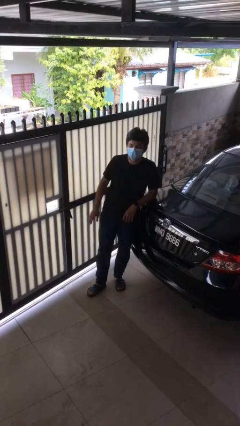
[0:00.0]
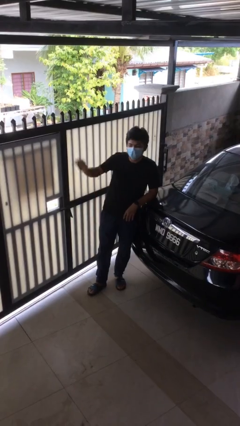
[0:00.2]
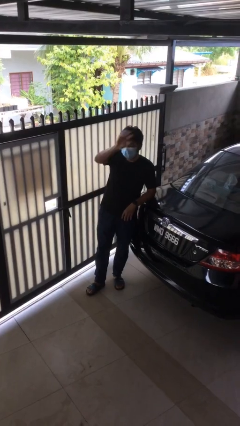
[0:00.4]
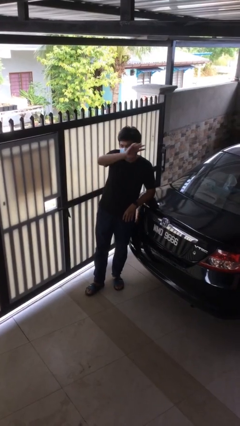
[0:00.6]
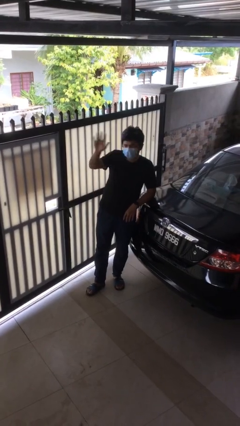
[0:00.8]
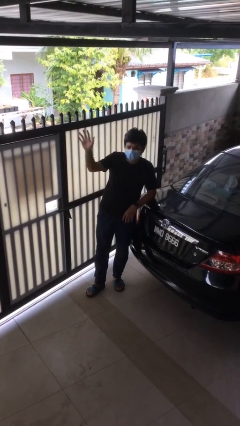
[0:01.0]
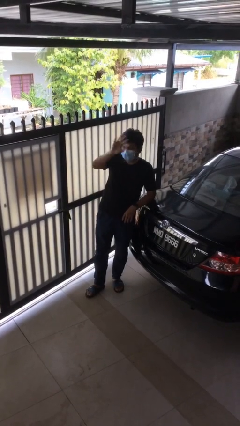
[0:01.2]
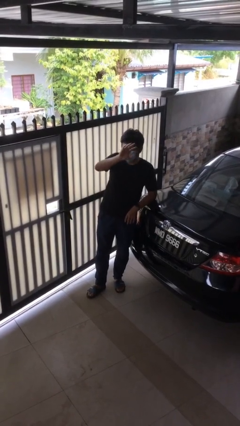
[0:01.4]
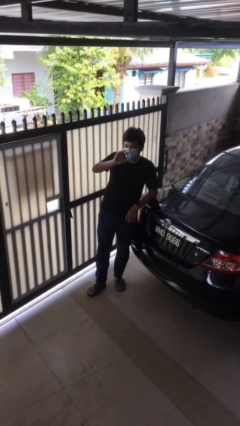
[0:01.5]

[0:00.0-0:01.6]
person waves at person

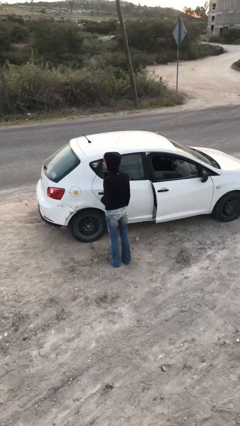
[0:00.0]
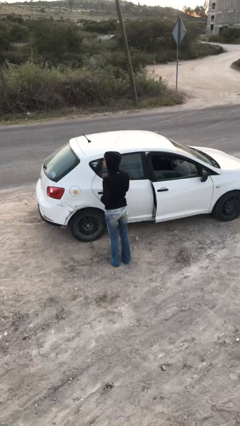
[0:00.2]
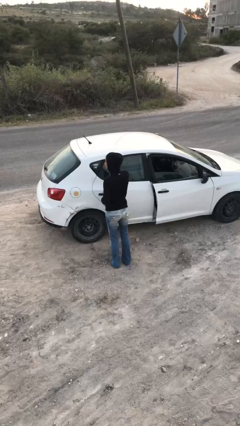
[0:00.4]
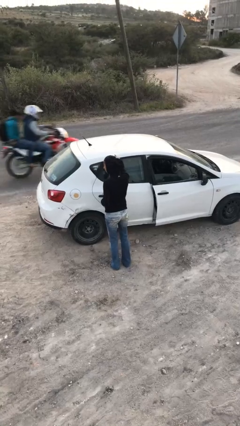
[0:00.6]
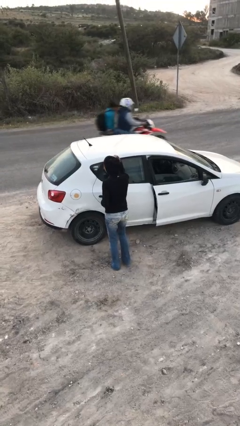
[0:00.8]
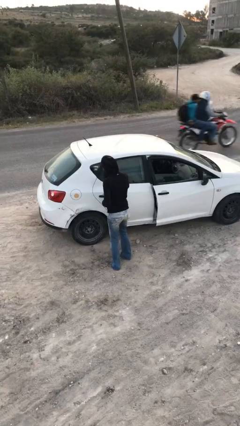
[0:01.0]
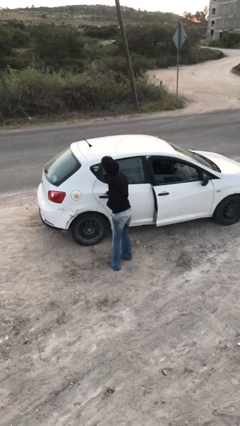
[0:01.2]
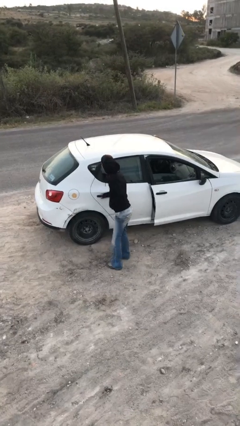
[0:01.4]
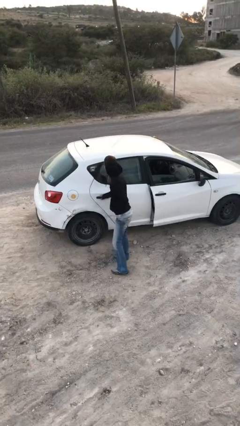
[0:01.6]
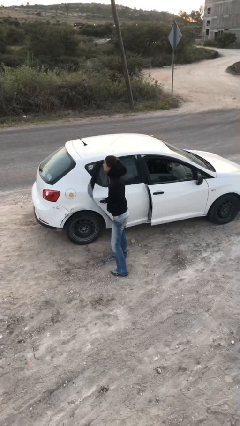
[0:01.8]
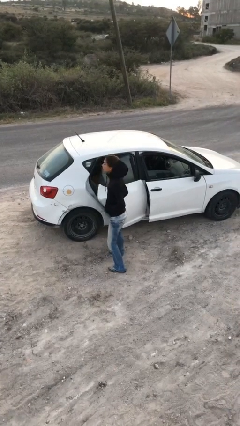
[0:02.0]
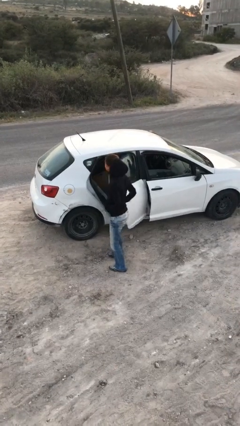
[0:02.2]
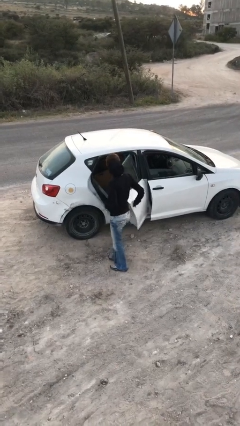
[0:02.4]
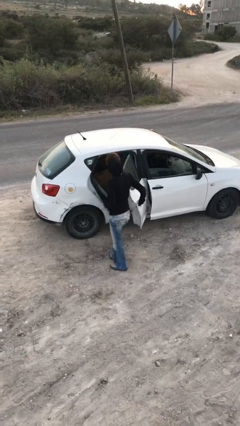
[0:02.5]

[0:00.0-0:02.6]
person opens car door

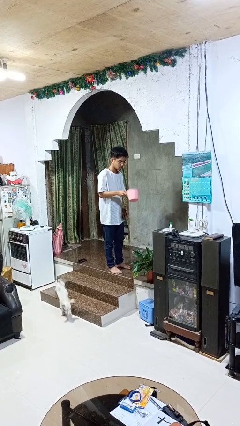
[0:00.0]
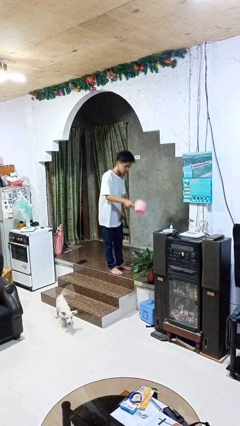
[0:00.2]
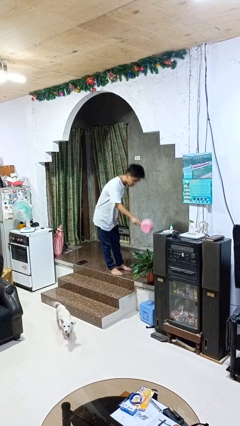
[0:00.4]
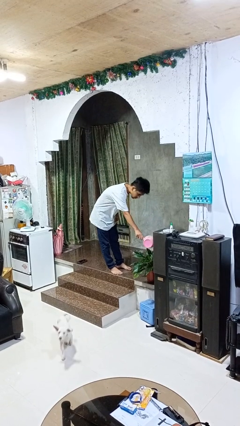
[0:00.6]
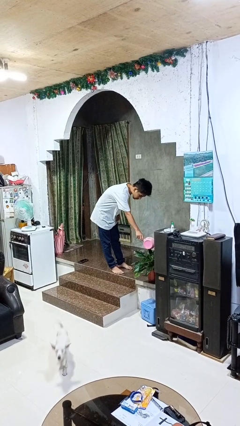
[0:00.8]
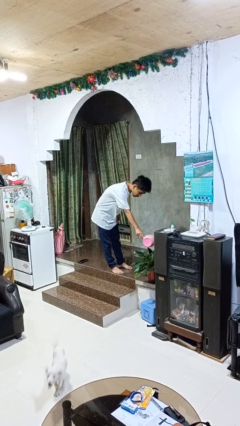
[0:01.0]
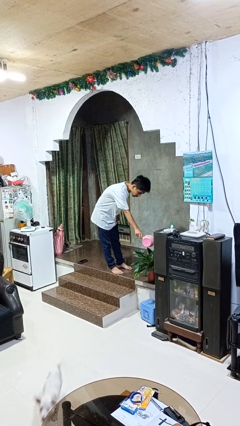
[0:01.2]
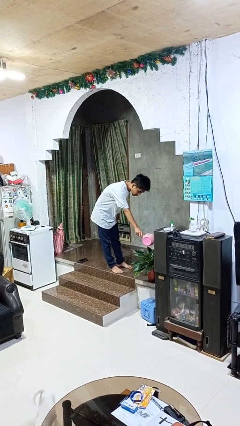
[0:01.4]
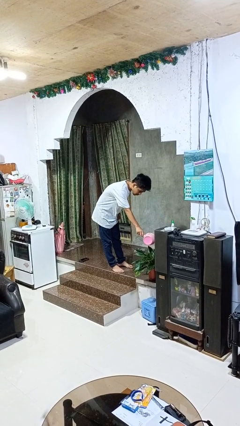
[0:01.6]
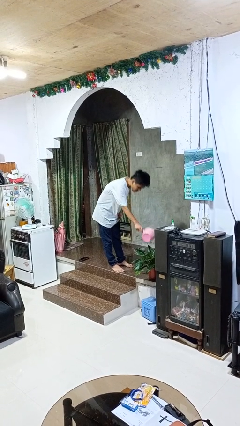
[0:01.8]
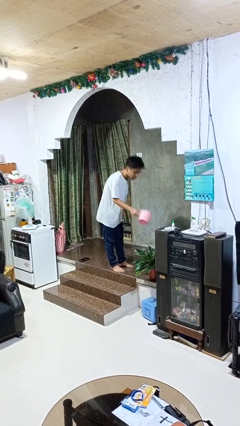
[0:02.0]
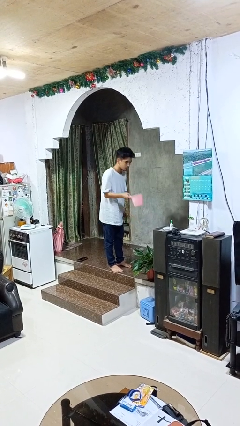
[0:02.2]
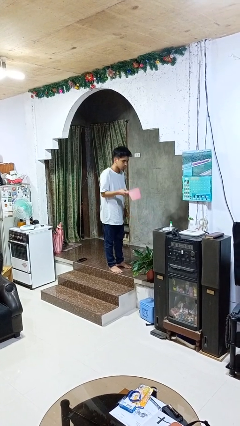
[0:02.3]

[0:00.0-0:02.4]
person waters houseplant

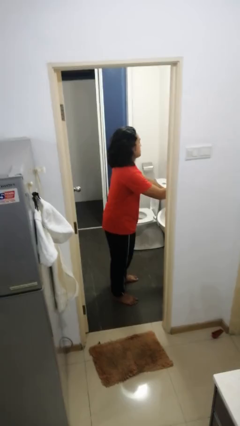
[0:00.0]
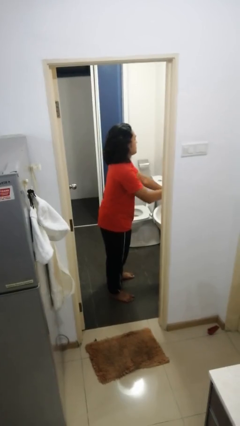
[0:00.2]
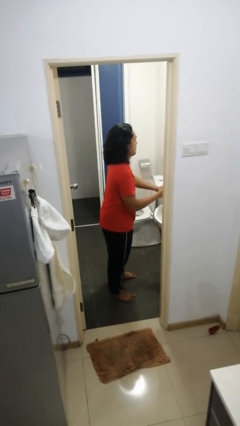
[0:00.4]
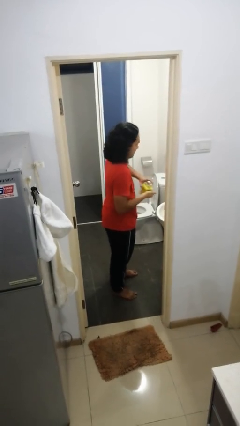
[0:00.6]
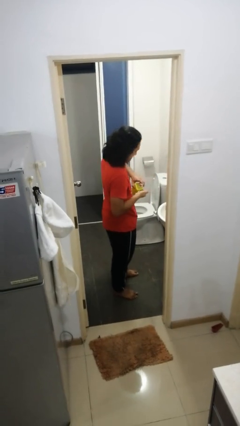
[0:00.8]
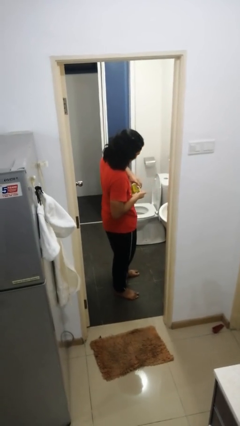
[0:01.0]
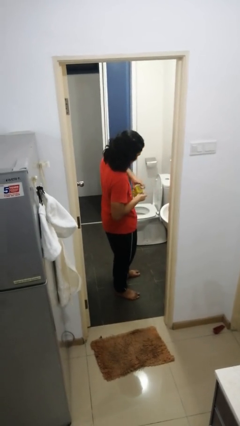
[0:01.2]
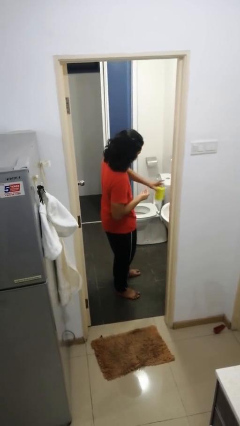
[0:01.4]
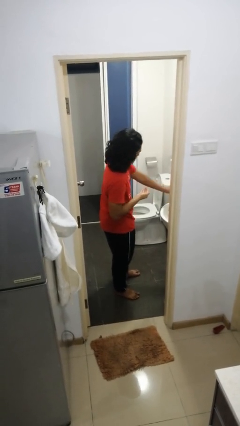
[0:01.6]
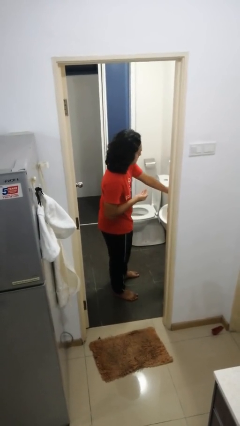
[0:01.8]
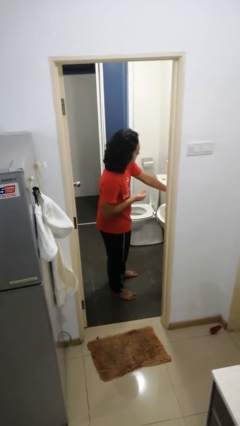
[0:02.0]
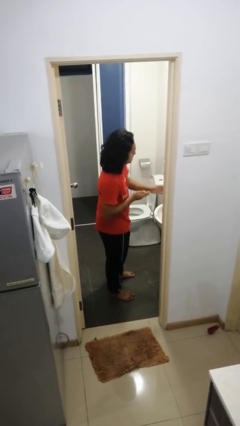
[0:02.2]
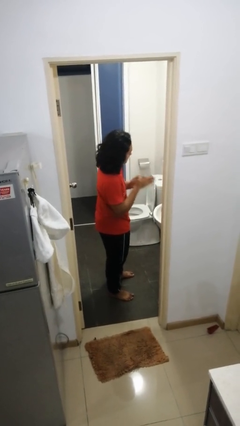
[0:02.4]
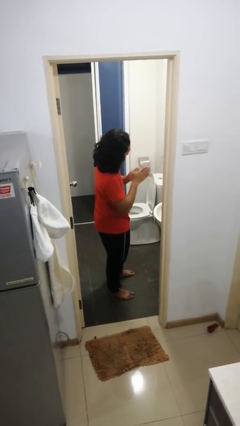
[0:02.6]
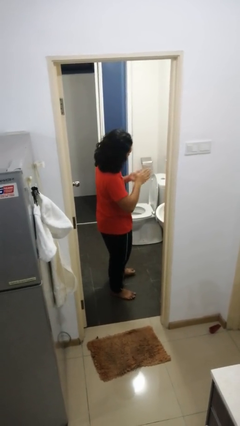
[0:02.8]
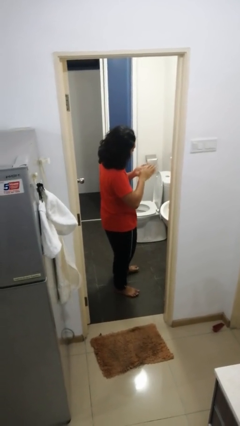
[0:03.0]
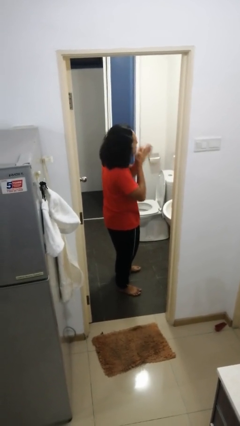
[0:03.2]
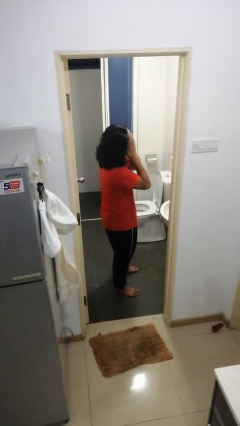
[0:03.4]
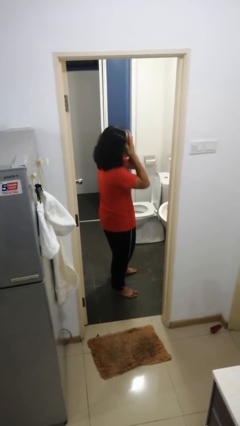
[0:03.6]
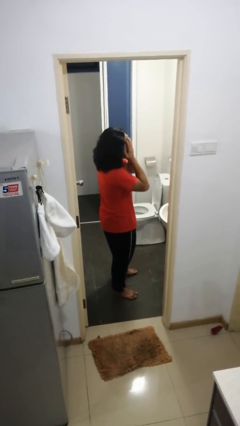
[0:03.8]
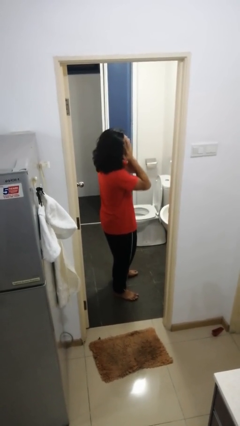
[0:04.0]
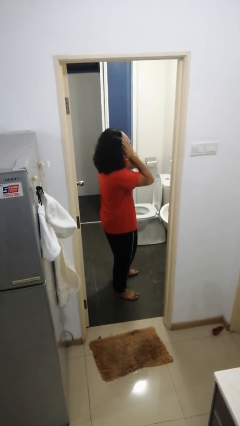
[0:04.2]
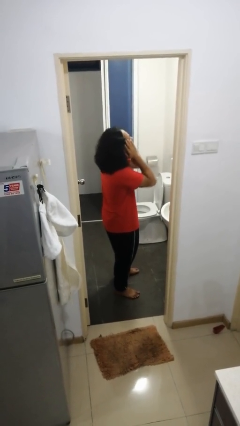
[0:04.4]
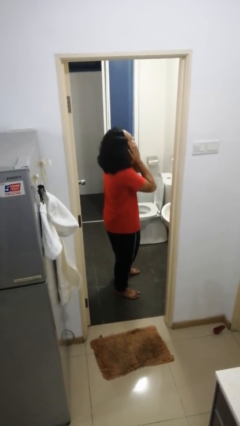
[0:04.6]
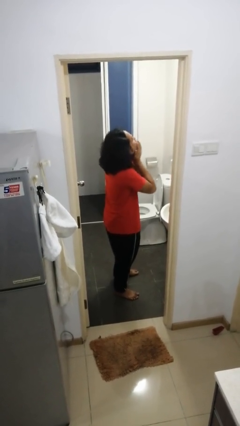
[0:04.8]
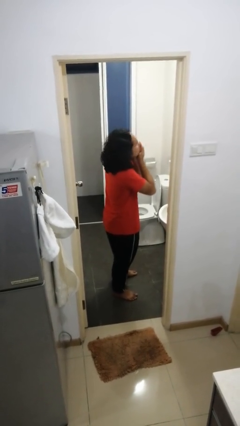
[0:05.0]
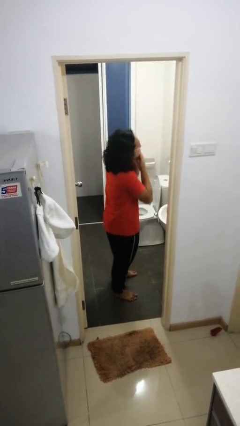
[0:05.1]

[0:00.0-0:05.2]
person applies shaving cream

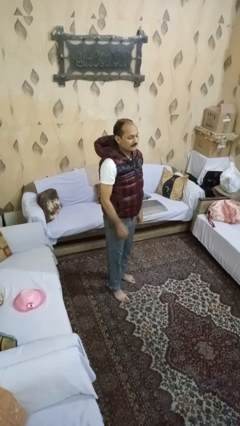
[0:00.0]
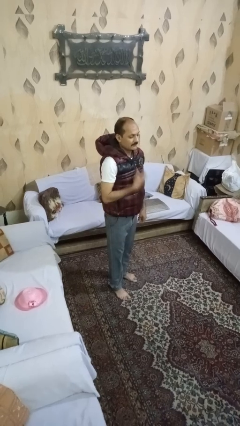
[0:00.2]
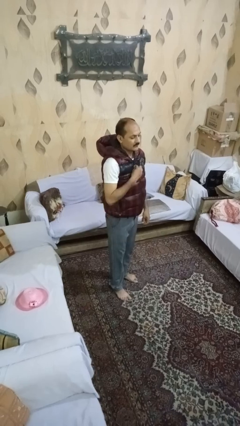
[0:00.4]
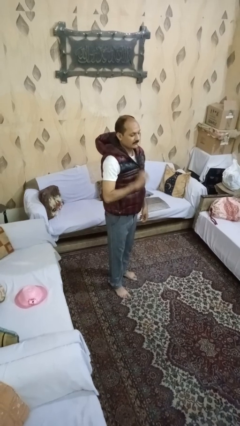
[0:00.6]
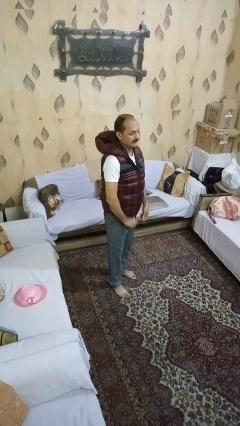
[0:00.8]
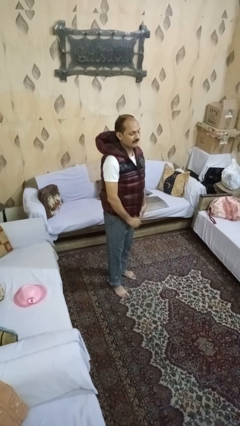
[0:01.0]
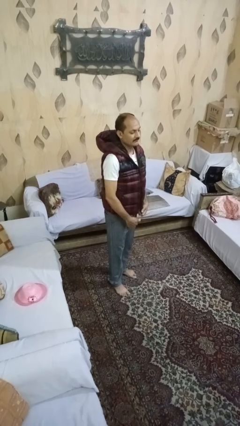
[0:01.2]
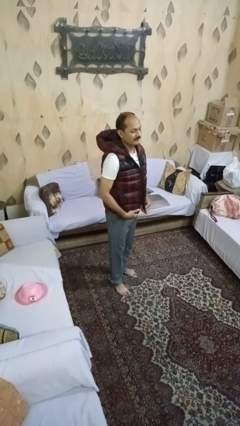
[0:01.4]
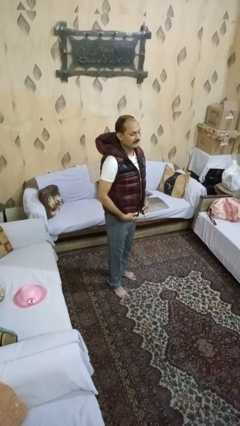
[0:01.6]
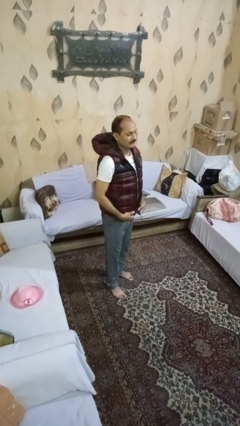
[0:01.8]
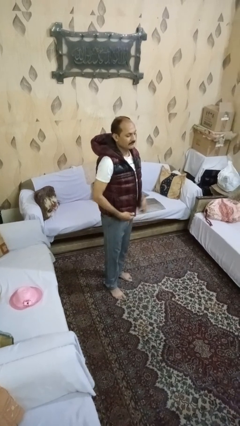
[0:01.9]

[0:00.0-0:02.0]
person unzips jacket

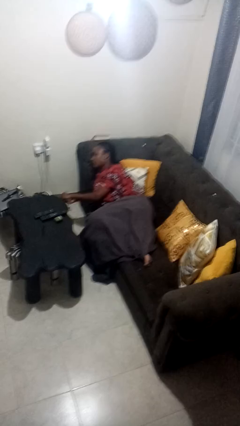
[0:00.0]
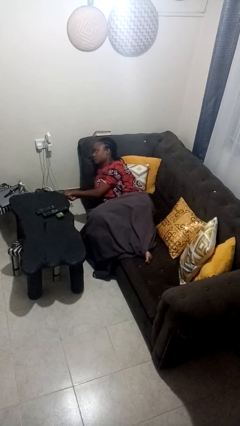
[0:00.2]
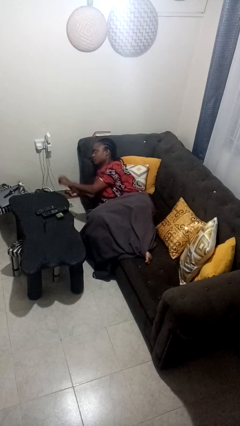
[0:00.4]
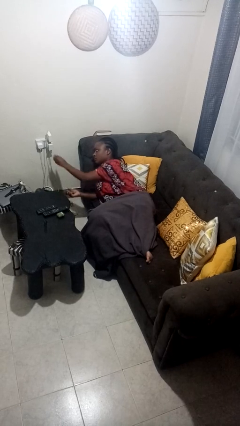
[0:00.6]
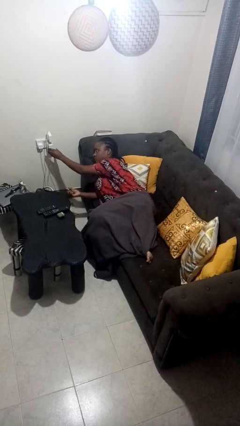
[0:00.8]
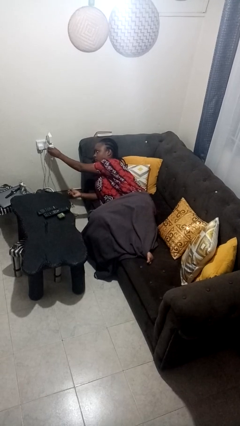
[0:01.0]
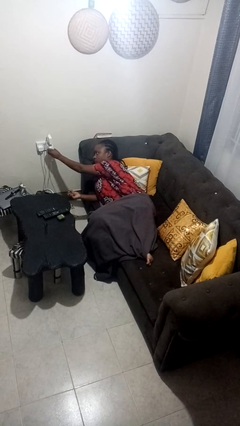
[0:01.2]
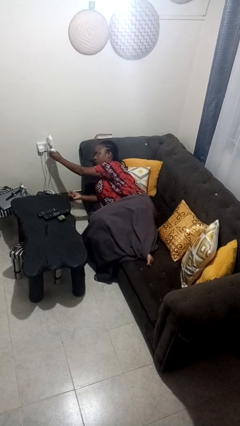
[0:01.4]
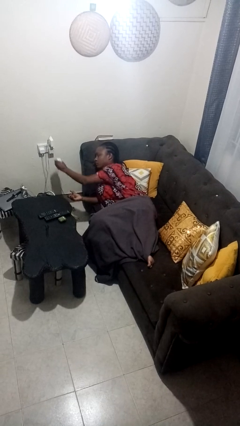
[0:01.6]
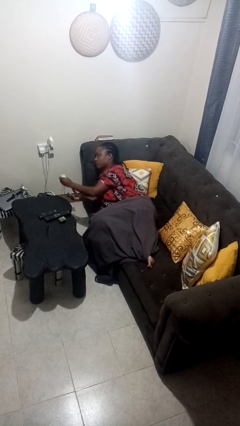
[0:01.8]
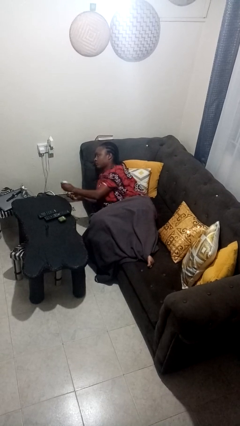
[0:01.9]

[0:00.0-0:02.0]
person unplugs from electrical socket

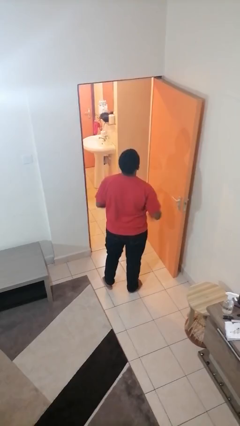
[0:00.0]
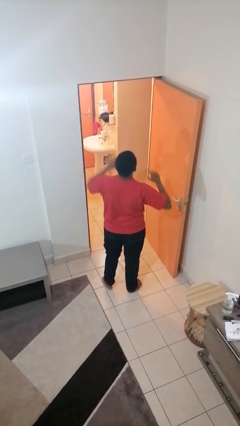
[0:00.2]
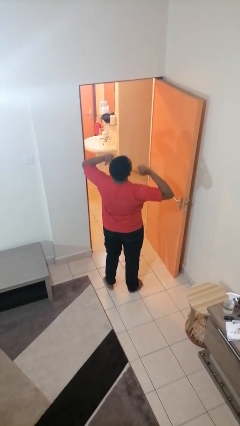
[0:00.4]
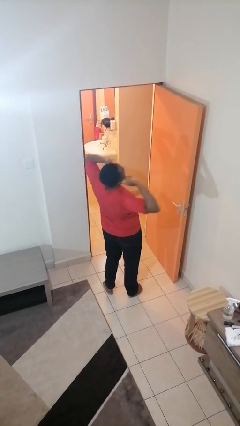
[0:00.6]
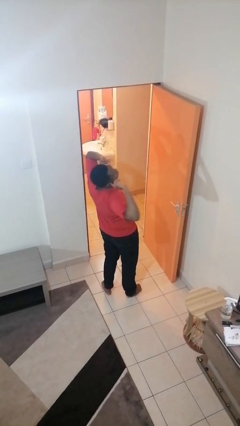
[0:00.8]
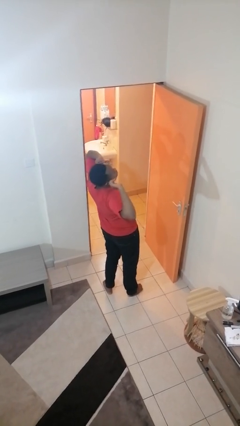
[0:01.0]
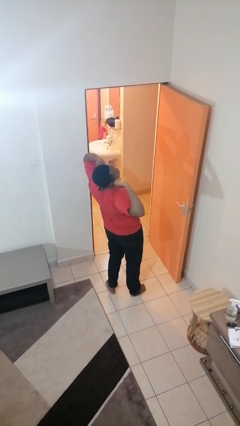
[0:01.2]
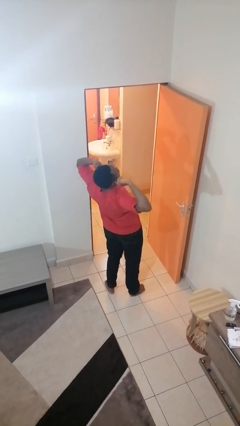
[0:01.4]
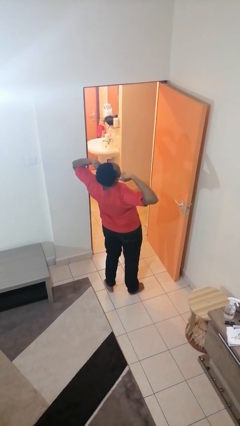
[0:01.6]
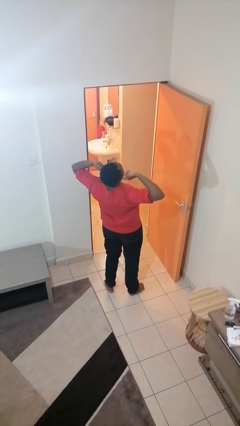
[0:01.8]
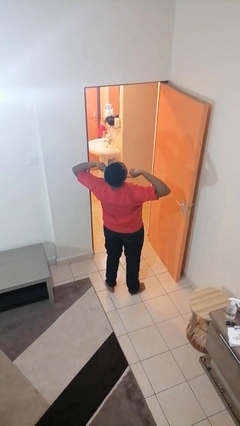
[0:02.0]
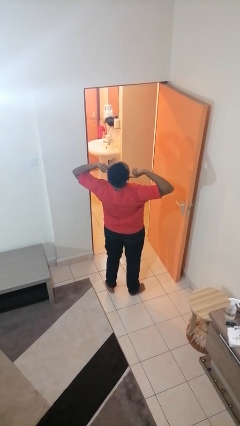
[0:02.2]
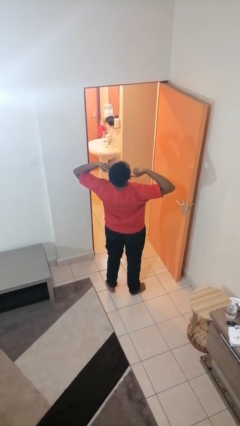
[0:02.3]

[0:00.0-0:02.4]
person puts fingers in ear
